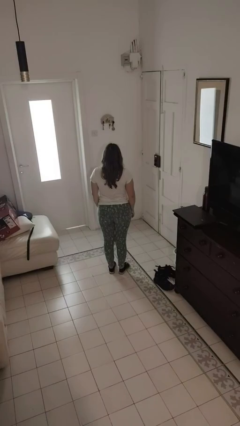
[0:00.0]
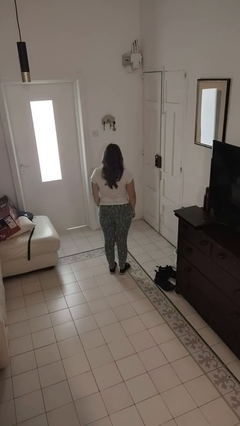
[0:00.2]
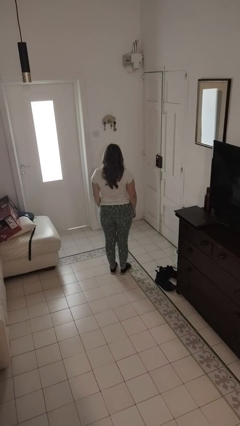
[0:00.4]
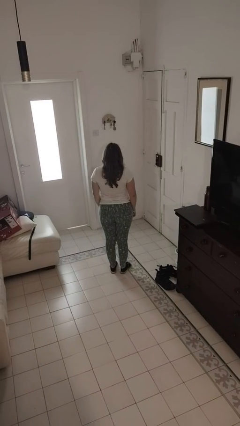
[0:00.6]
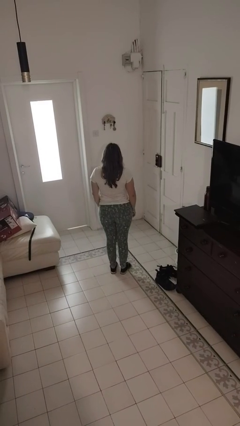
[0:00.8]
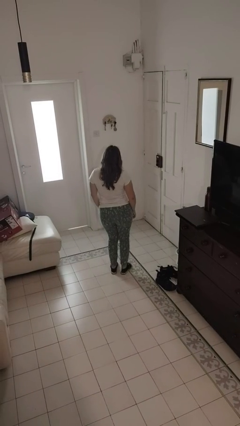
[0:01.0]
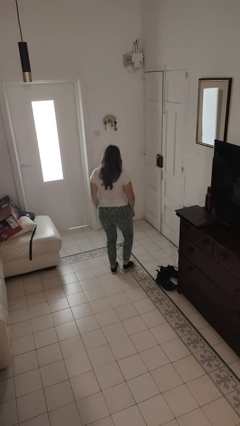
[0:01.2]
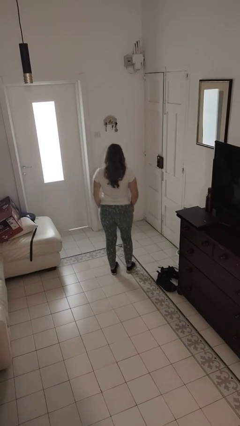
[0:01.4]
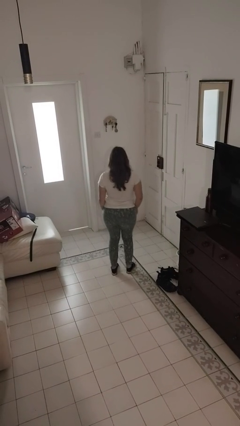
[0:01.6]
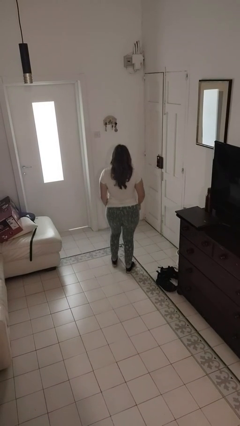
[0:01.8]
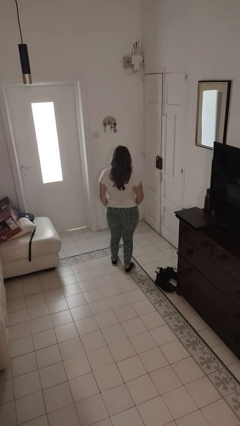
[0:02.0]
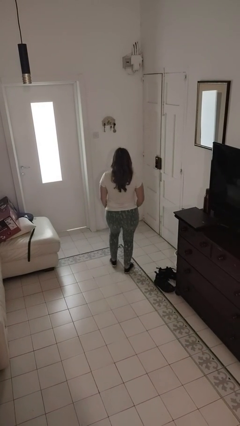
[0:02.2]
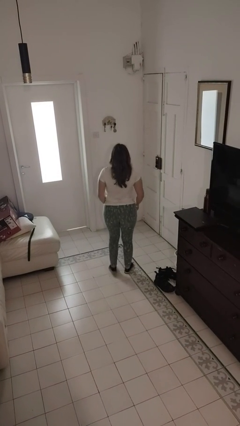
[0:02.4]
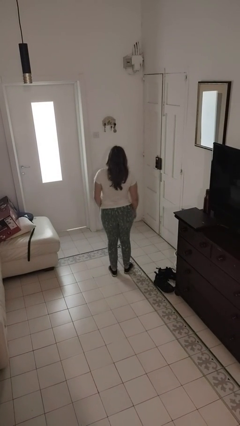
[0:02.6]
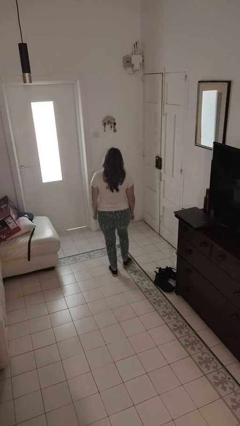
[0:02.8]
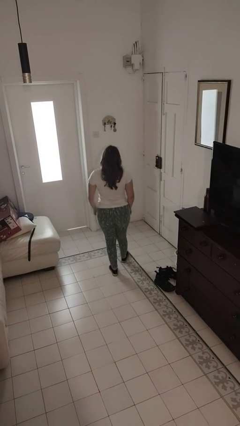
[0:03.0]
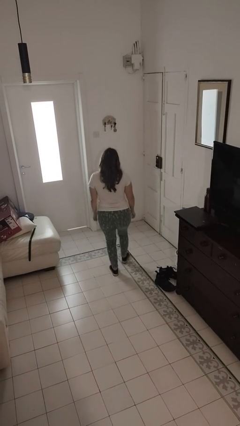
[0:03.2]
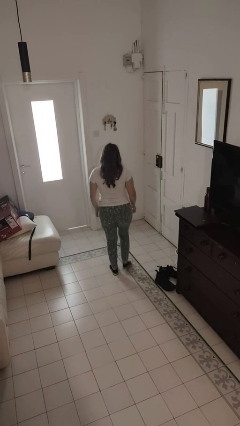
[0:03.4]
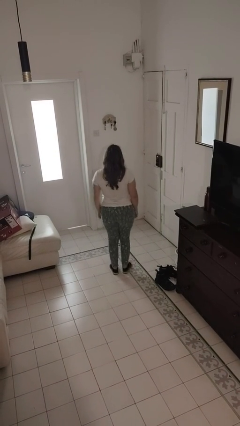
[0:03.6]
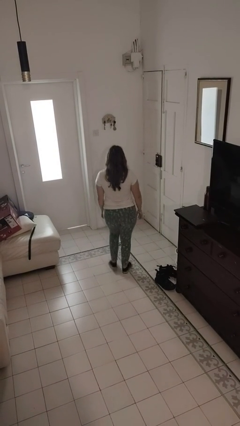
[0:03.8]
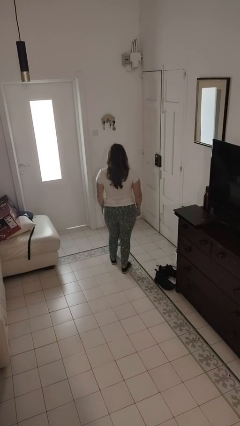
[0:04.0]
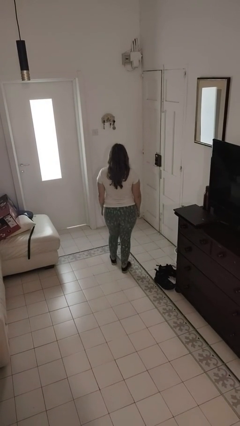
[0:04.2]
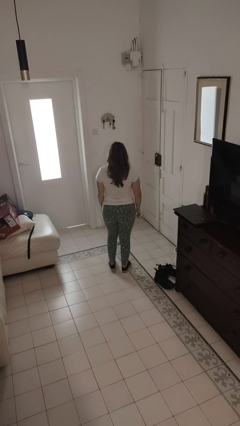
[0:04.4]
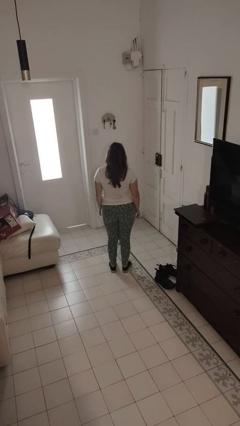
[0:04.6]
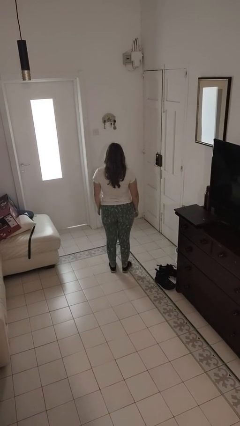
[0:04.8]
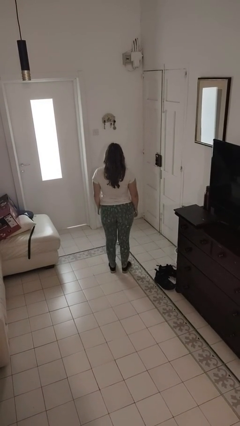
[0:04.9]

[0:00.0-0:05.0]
person dances in place

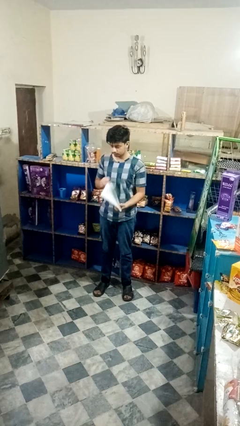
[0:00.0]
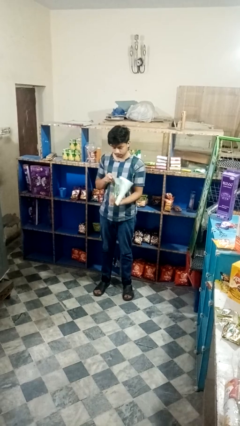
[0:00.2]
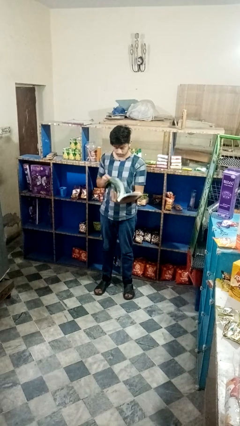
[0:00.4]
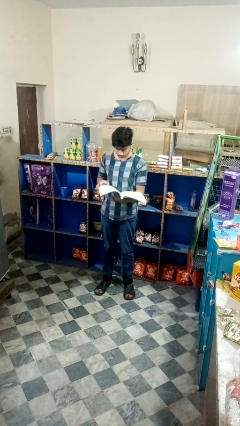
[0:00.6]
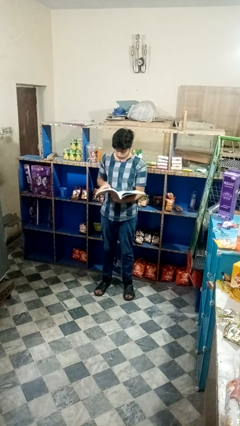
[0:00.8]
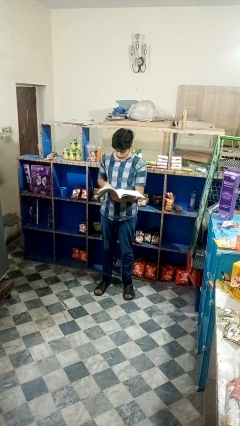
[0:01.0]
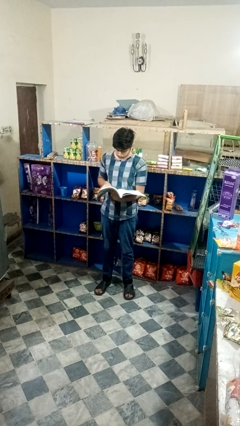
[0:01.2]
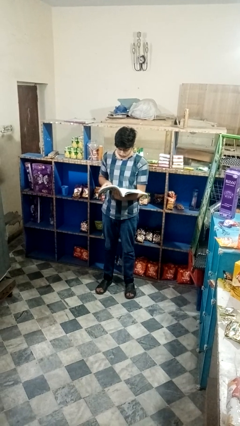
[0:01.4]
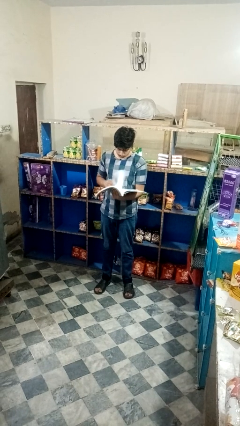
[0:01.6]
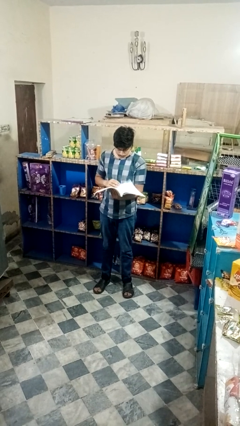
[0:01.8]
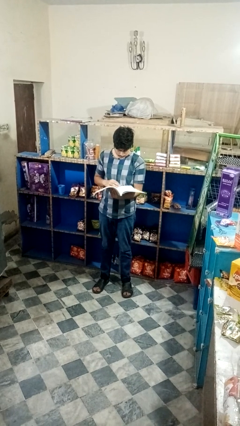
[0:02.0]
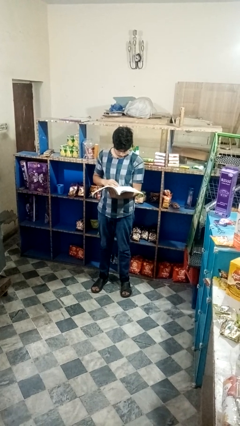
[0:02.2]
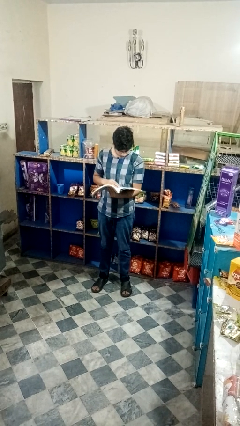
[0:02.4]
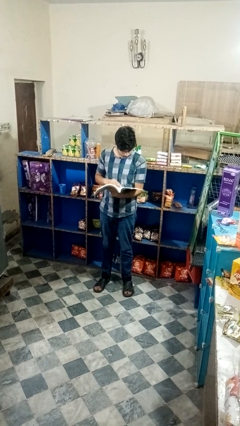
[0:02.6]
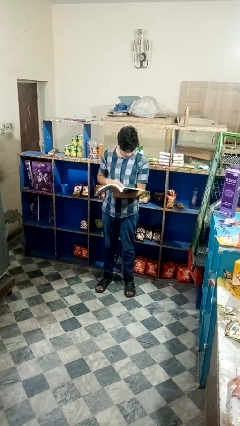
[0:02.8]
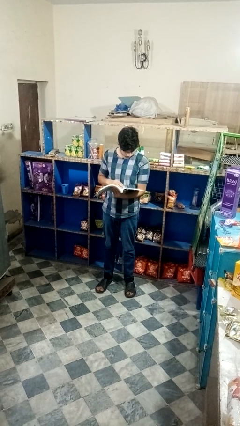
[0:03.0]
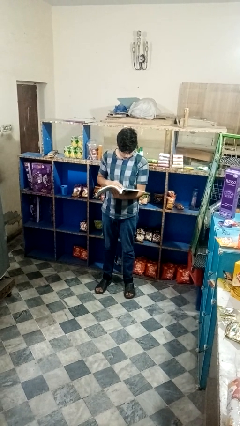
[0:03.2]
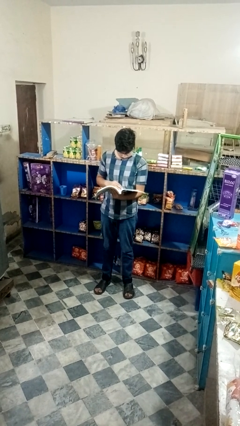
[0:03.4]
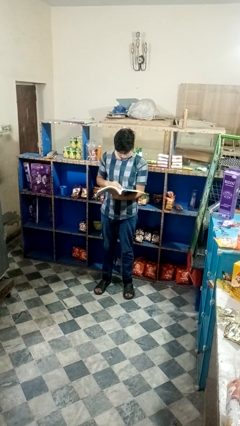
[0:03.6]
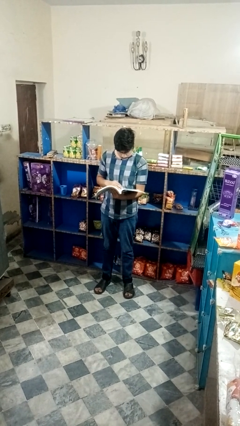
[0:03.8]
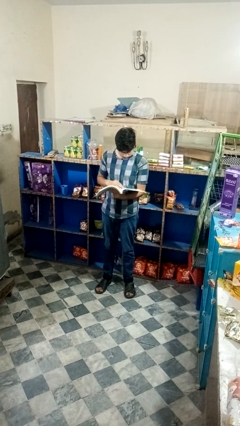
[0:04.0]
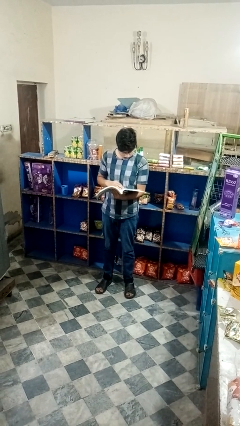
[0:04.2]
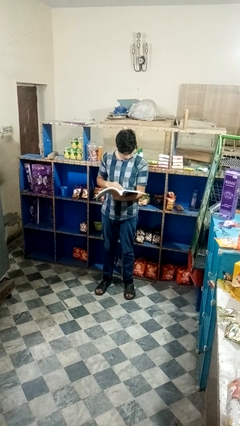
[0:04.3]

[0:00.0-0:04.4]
person reads magazine

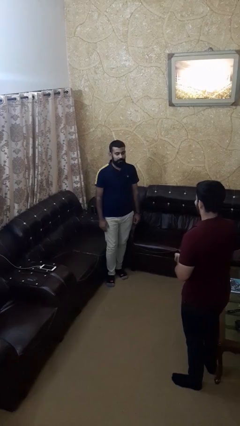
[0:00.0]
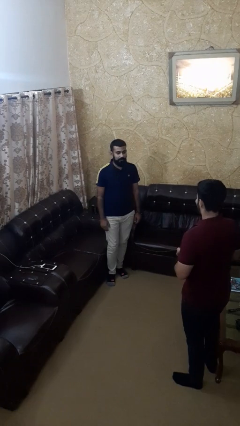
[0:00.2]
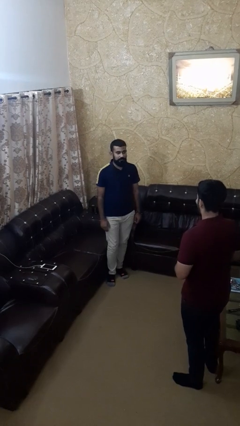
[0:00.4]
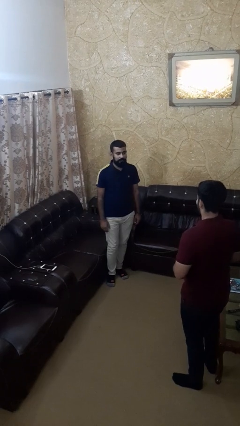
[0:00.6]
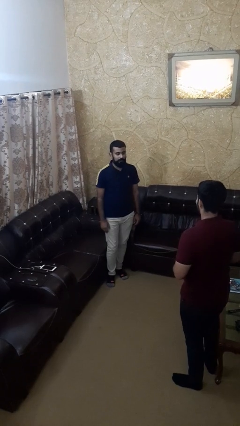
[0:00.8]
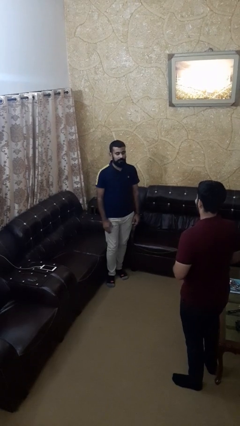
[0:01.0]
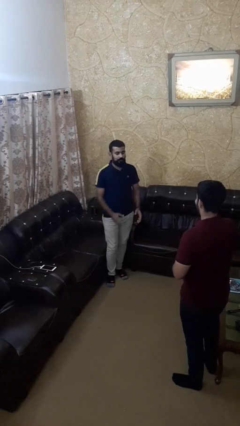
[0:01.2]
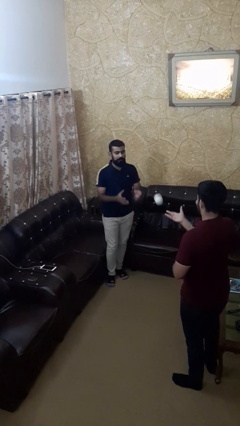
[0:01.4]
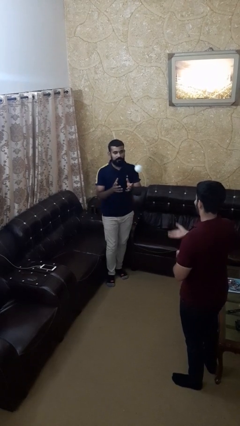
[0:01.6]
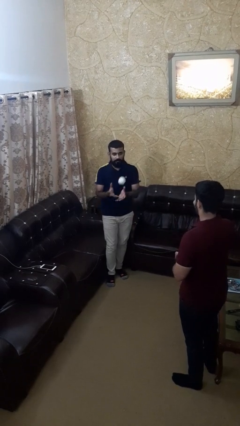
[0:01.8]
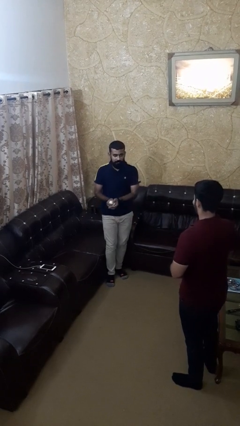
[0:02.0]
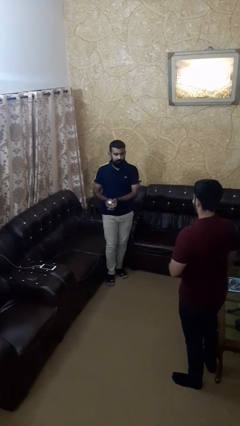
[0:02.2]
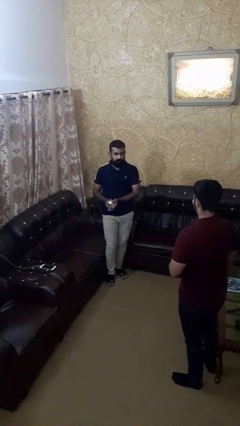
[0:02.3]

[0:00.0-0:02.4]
person catches object from person

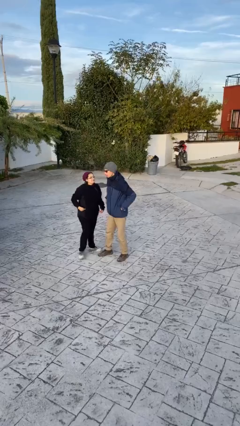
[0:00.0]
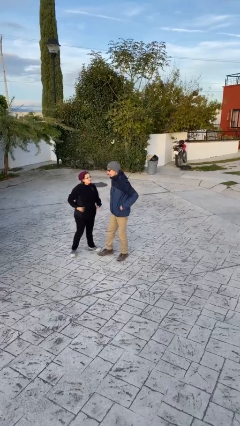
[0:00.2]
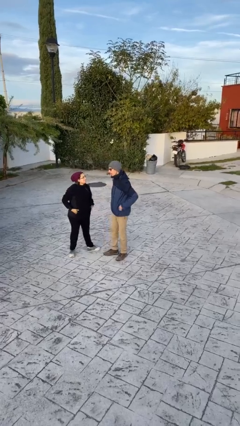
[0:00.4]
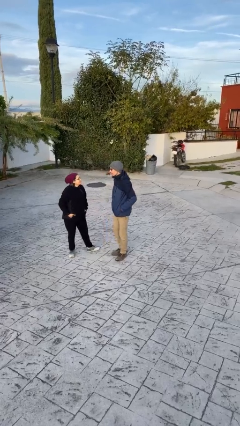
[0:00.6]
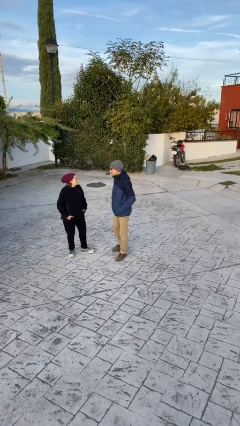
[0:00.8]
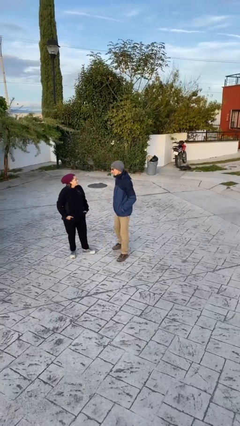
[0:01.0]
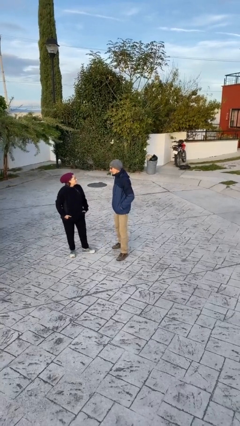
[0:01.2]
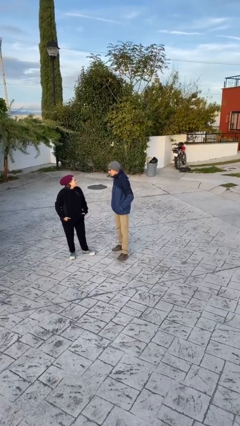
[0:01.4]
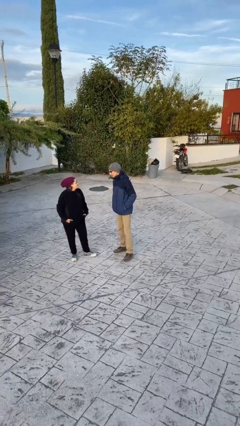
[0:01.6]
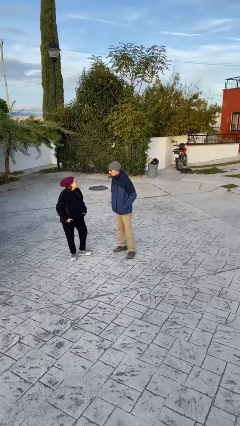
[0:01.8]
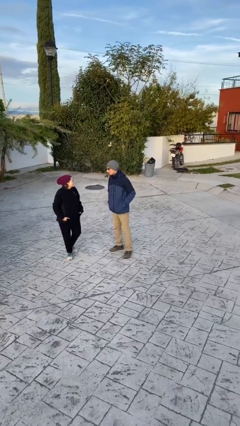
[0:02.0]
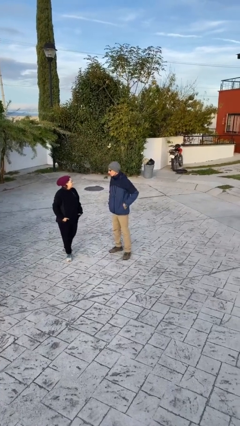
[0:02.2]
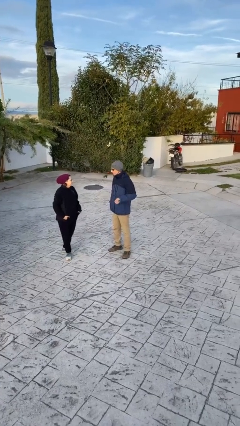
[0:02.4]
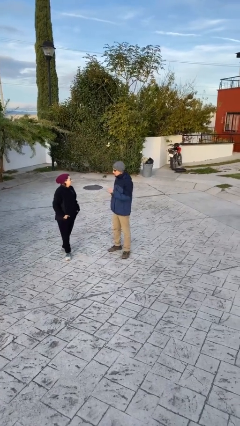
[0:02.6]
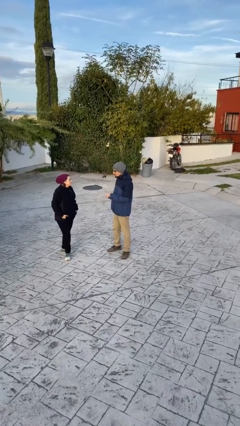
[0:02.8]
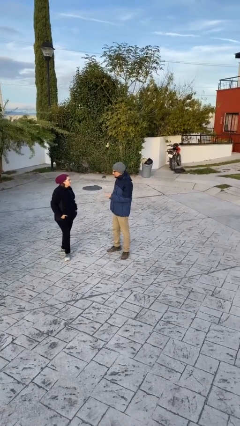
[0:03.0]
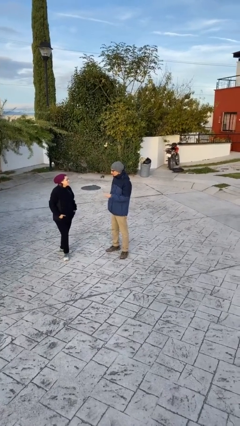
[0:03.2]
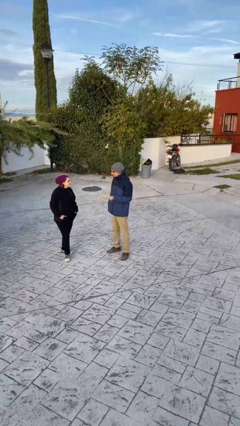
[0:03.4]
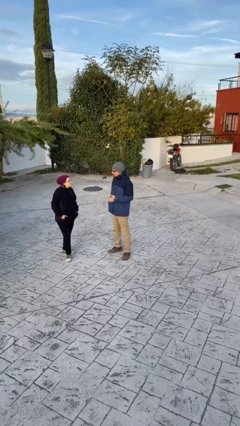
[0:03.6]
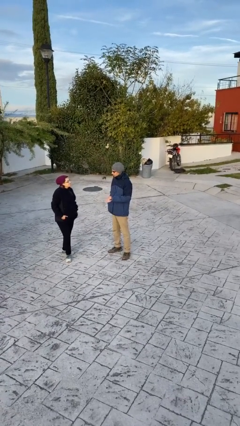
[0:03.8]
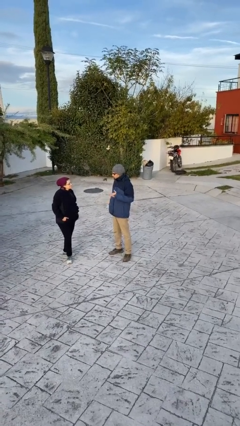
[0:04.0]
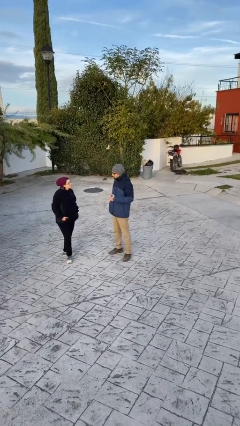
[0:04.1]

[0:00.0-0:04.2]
person talks to person

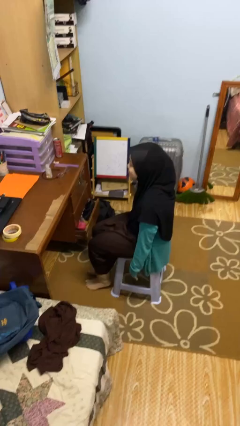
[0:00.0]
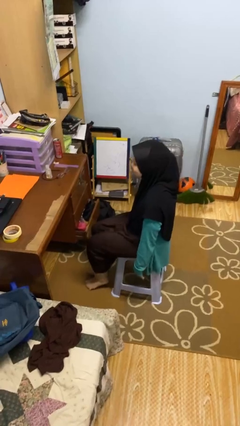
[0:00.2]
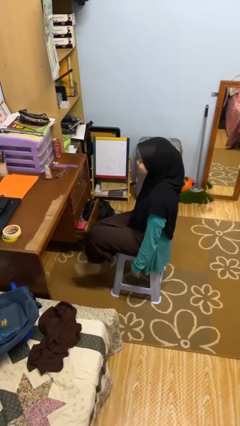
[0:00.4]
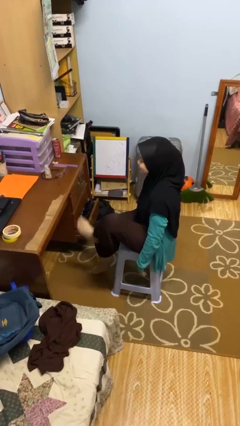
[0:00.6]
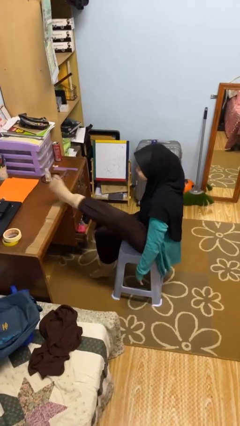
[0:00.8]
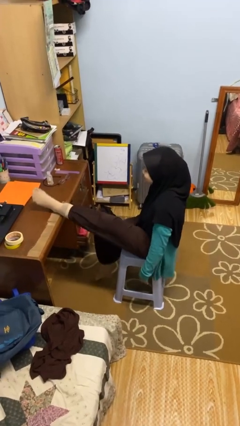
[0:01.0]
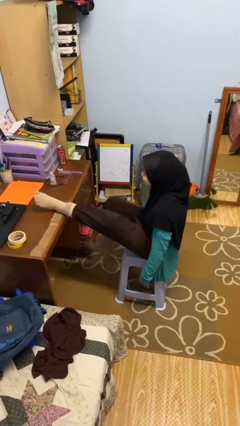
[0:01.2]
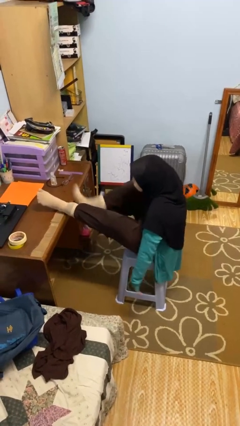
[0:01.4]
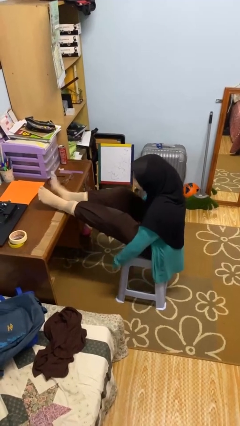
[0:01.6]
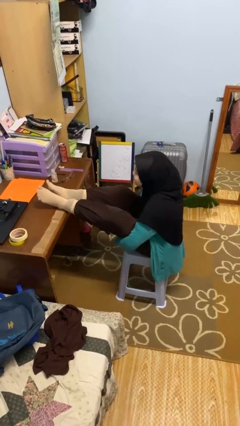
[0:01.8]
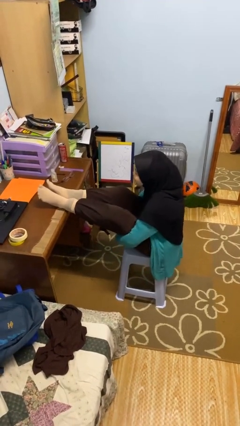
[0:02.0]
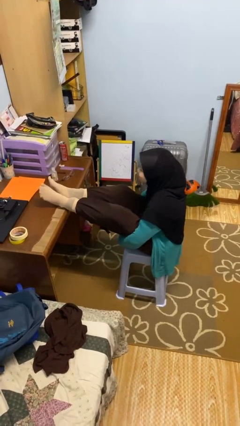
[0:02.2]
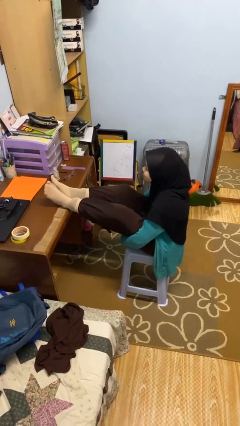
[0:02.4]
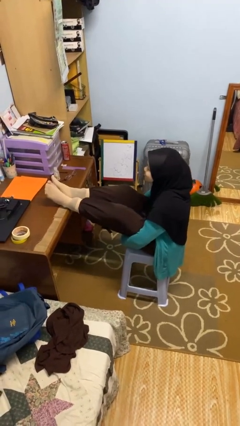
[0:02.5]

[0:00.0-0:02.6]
person puts feet up
